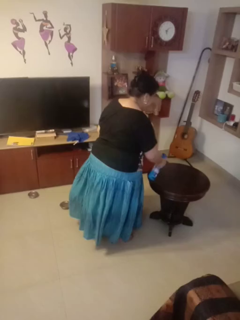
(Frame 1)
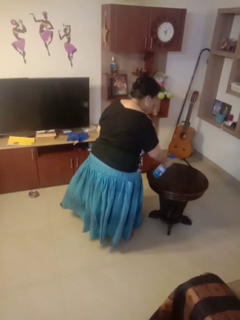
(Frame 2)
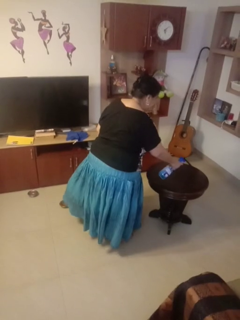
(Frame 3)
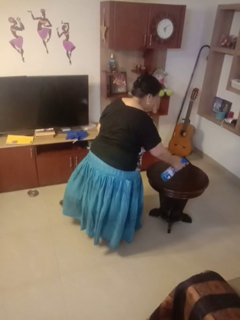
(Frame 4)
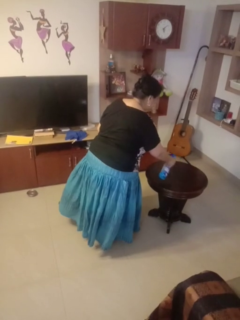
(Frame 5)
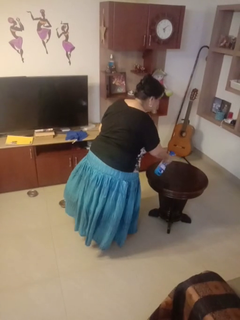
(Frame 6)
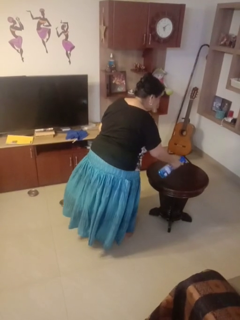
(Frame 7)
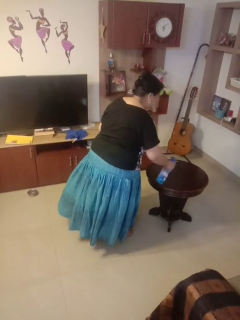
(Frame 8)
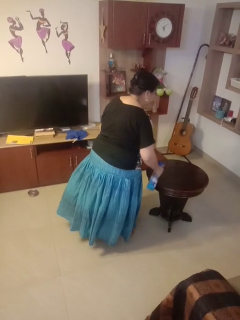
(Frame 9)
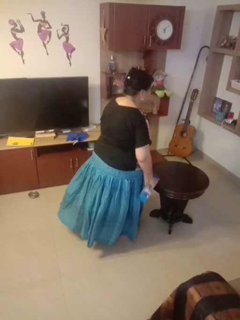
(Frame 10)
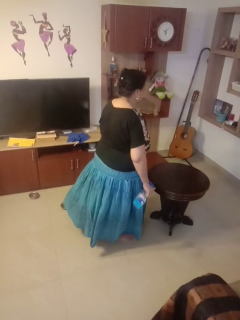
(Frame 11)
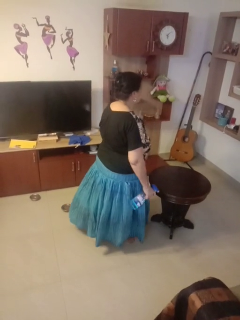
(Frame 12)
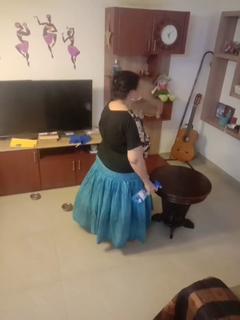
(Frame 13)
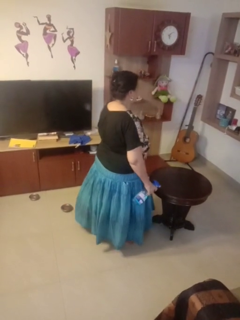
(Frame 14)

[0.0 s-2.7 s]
person sprays from bottle

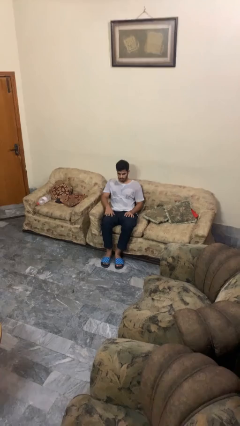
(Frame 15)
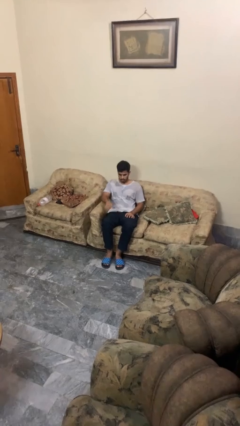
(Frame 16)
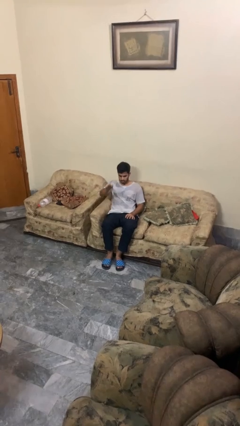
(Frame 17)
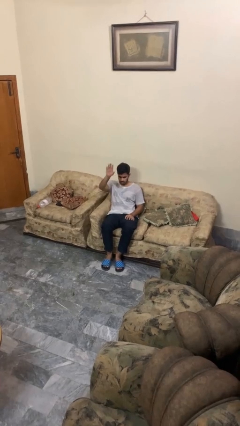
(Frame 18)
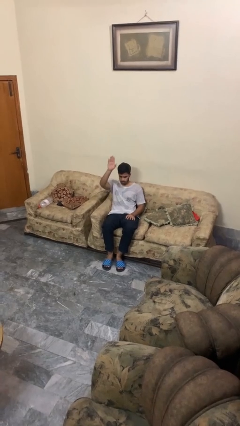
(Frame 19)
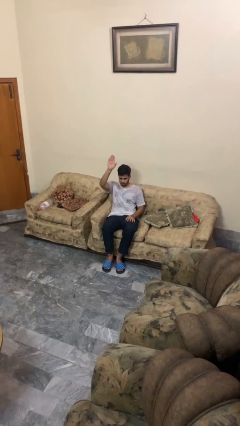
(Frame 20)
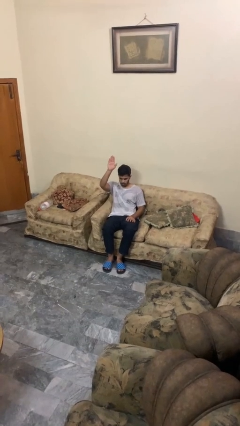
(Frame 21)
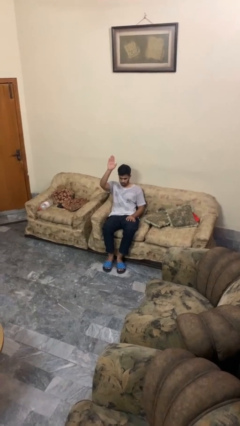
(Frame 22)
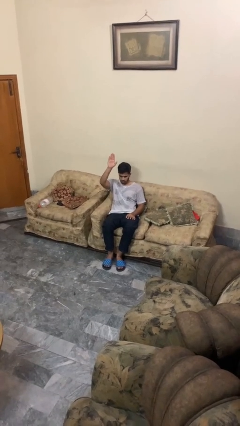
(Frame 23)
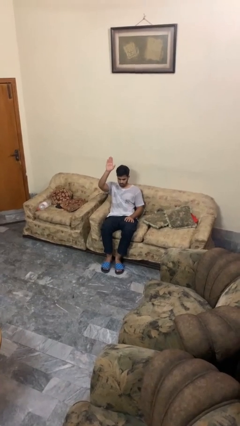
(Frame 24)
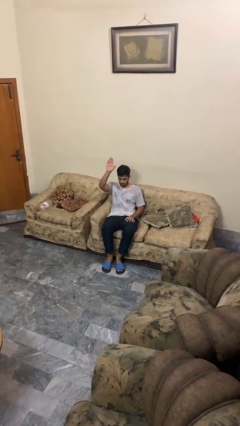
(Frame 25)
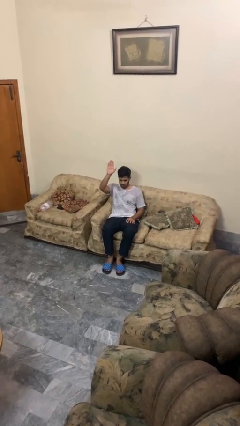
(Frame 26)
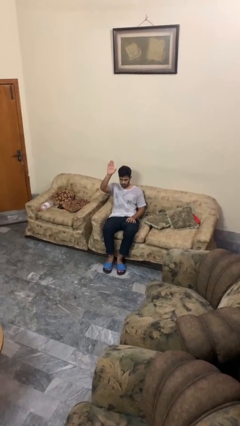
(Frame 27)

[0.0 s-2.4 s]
person gestures raise hand

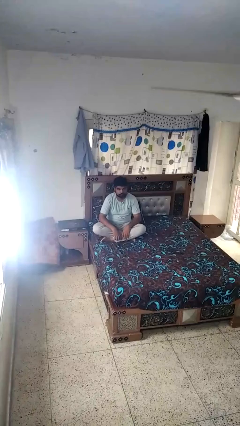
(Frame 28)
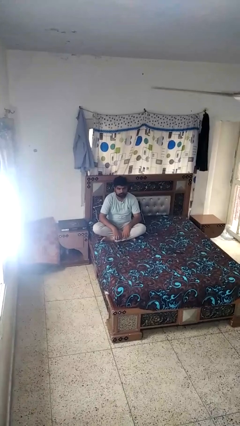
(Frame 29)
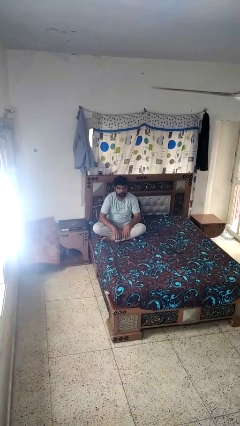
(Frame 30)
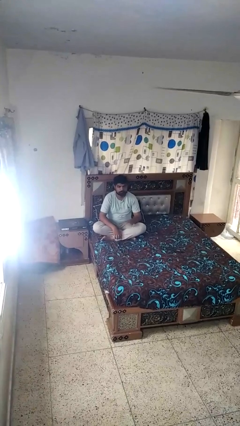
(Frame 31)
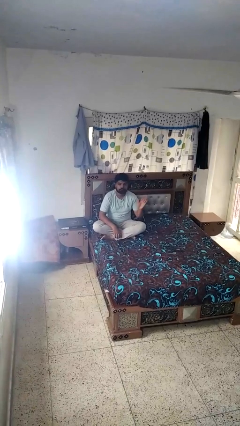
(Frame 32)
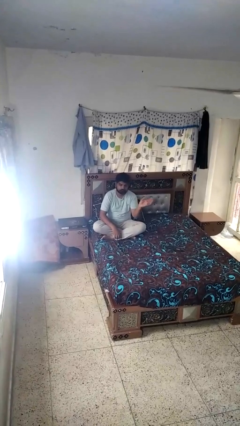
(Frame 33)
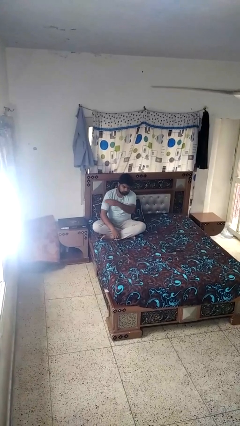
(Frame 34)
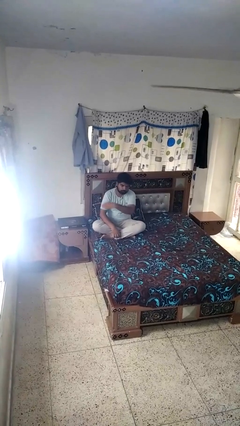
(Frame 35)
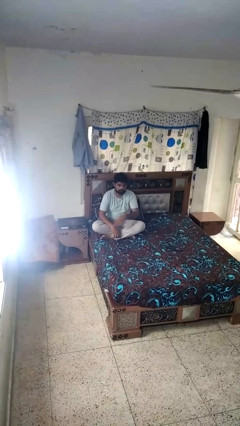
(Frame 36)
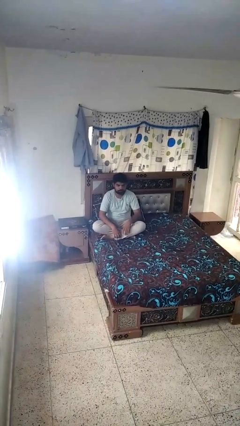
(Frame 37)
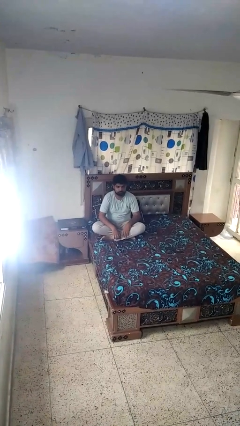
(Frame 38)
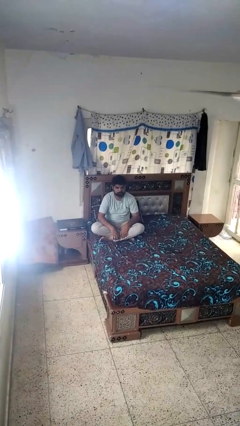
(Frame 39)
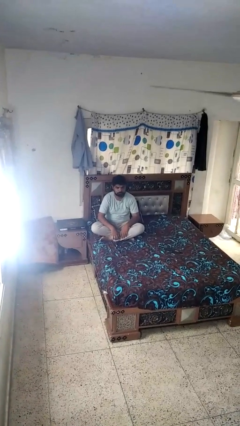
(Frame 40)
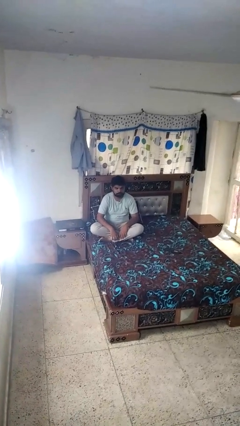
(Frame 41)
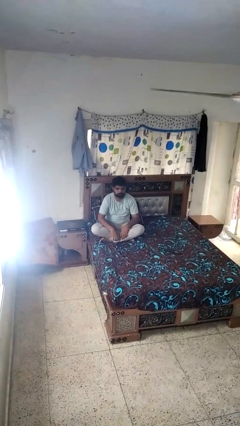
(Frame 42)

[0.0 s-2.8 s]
person gestures swipe right

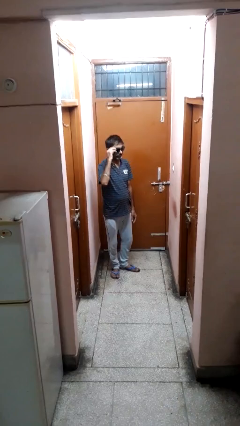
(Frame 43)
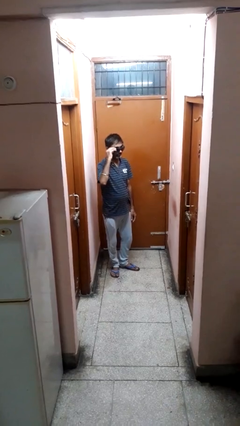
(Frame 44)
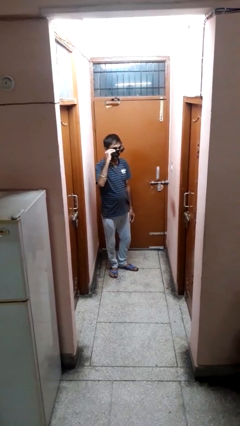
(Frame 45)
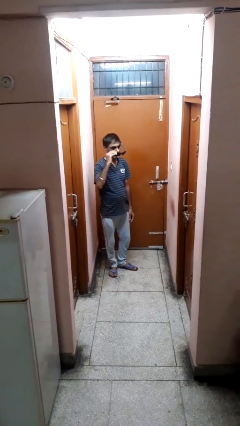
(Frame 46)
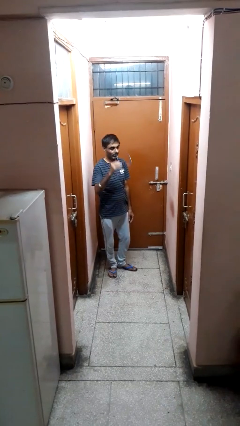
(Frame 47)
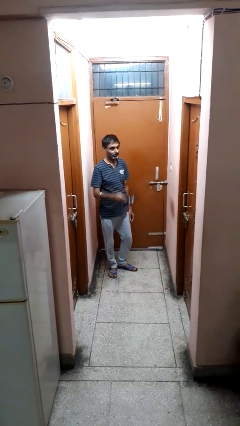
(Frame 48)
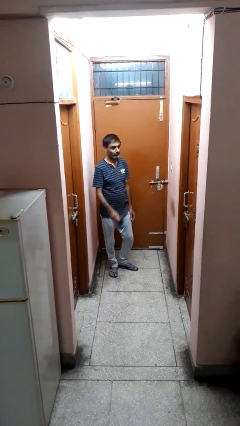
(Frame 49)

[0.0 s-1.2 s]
person takes off sunglasses

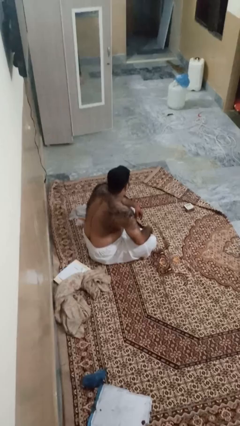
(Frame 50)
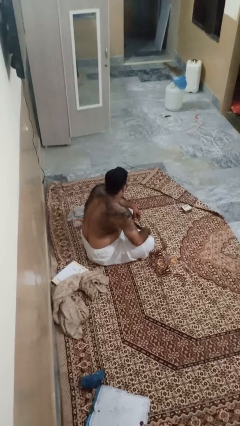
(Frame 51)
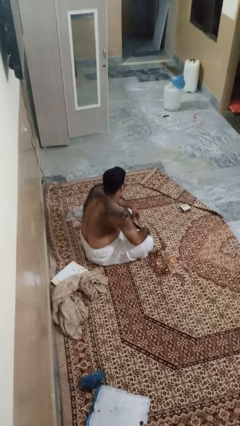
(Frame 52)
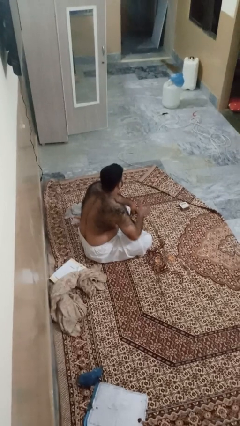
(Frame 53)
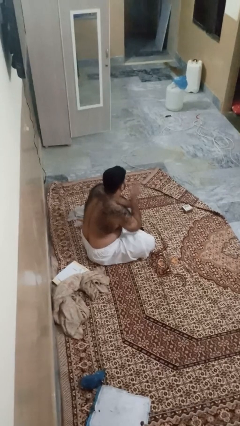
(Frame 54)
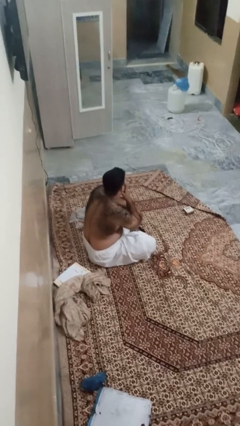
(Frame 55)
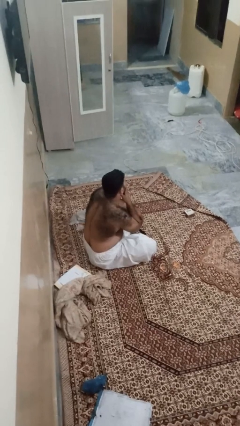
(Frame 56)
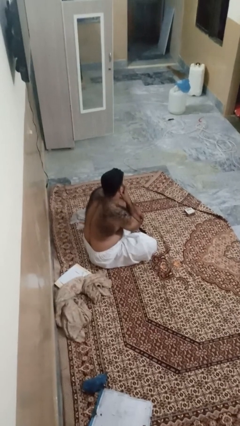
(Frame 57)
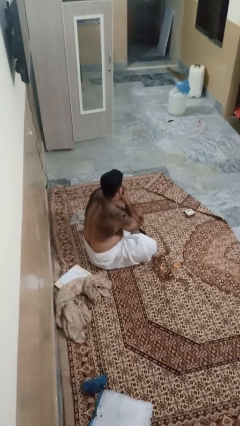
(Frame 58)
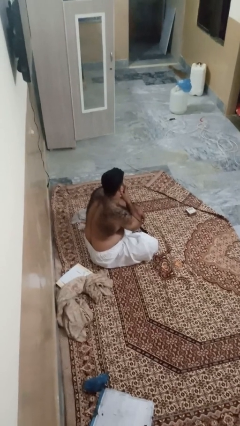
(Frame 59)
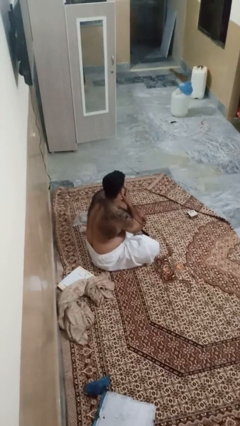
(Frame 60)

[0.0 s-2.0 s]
person strokes chin

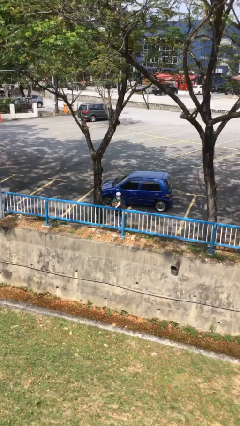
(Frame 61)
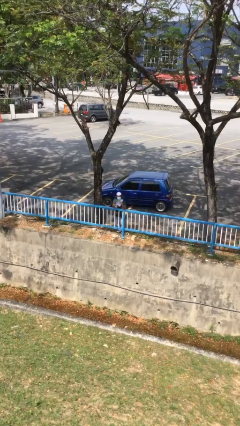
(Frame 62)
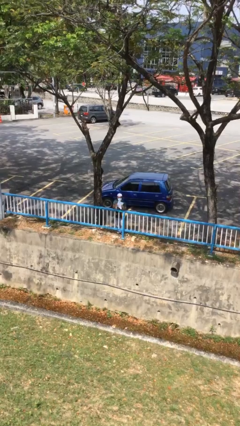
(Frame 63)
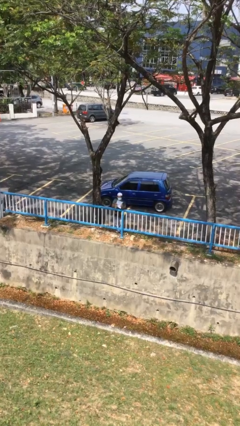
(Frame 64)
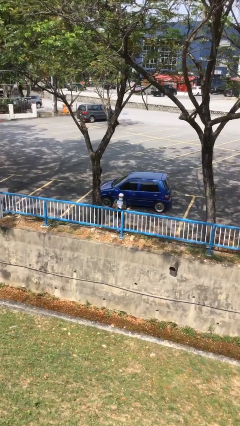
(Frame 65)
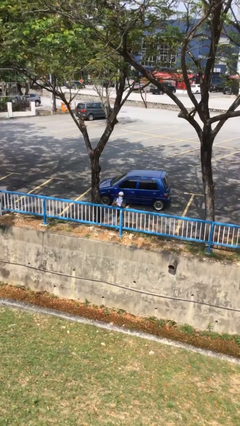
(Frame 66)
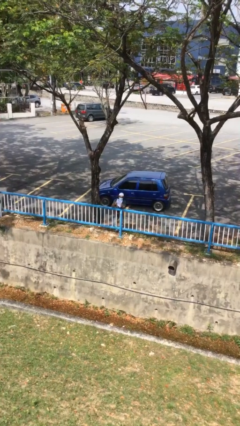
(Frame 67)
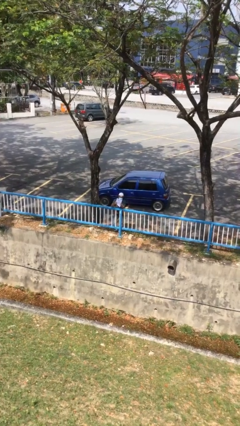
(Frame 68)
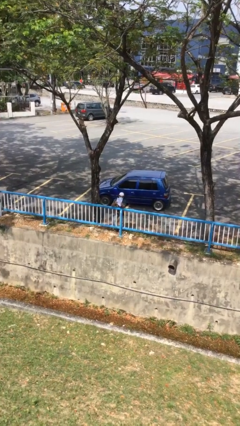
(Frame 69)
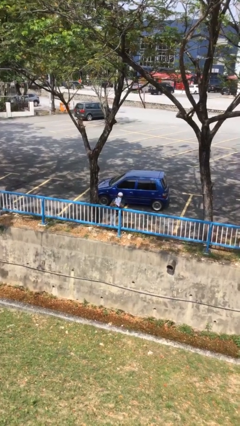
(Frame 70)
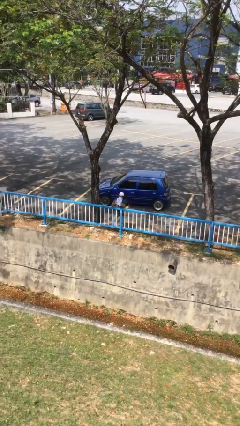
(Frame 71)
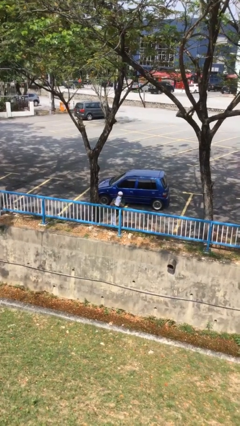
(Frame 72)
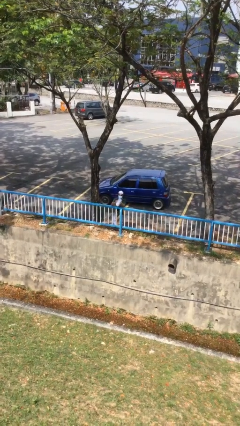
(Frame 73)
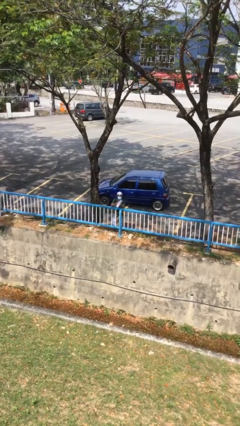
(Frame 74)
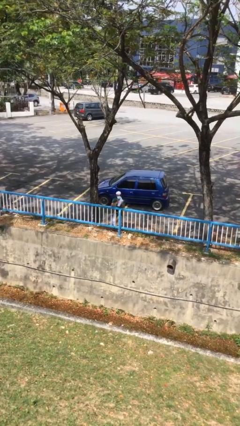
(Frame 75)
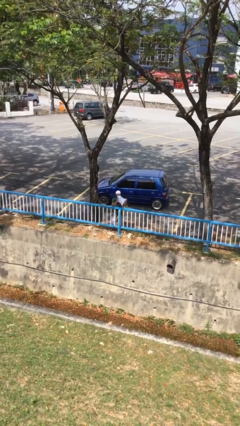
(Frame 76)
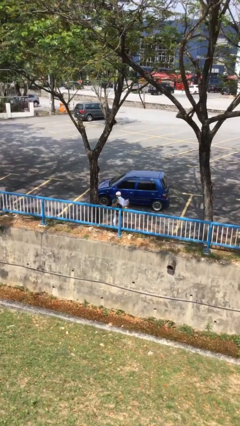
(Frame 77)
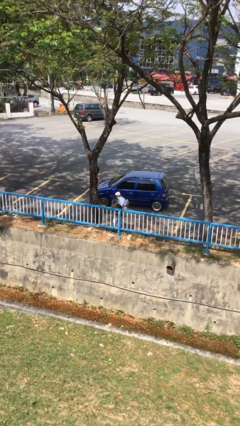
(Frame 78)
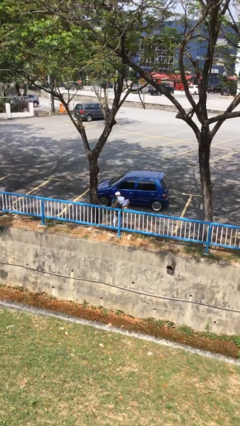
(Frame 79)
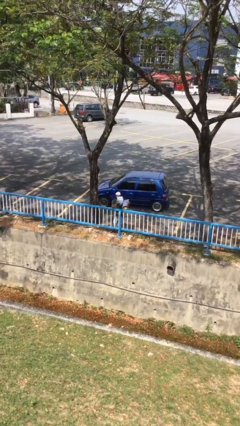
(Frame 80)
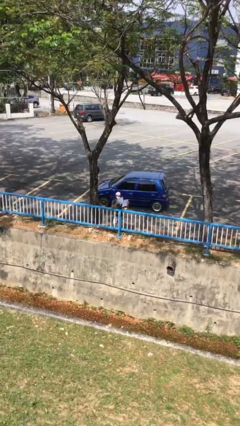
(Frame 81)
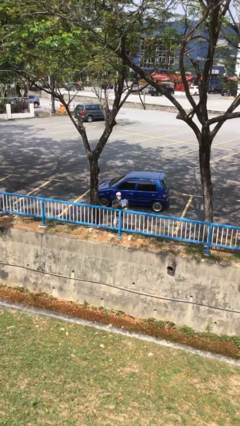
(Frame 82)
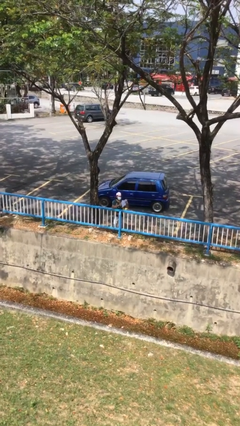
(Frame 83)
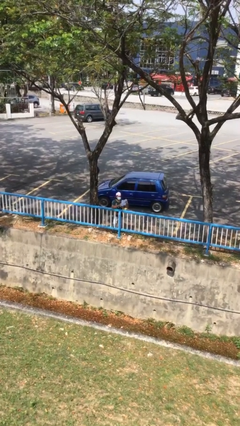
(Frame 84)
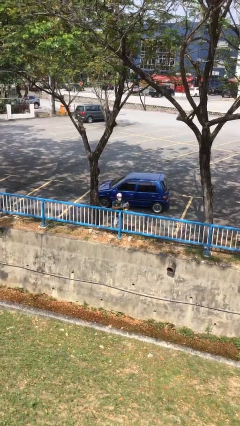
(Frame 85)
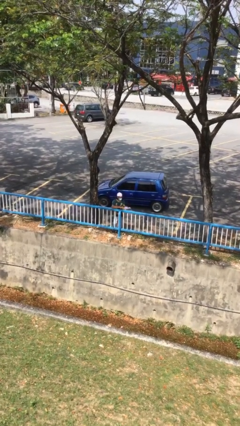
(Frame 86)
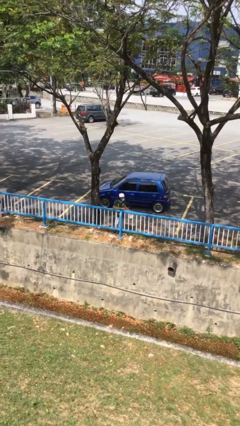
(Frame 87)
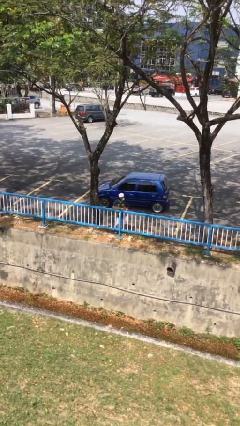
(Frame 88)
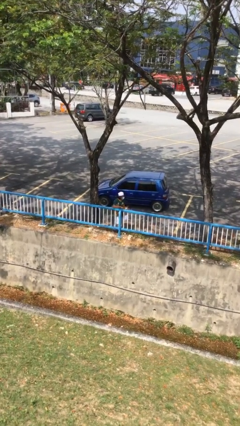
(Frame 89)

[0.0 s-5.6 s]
person reads document

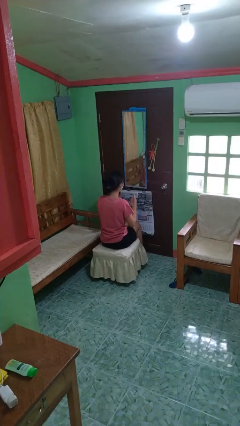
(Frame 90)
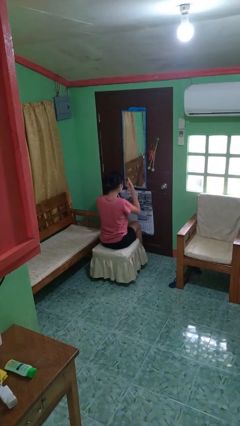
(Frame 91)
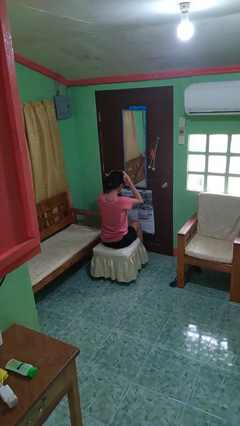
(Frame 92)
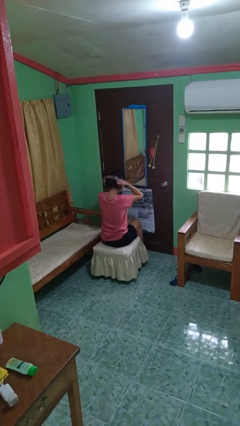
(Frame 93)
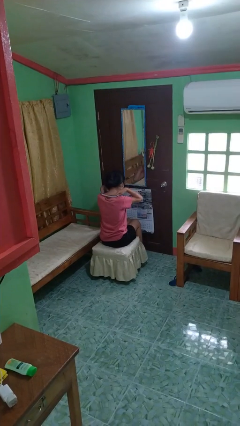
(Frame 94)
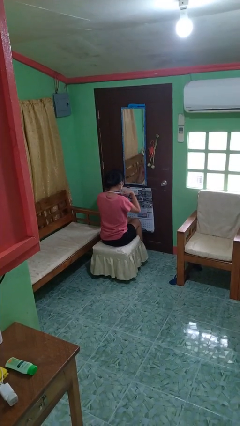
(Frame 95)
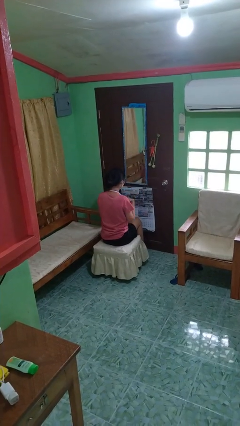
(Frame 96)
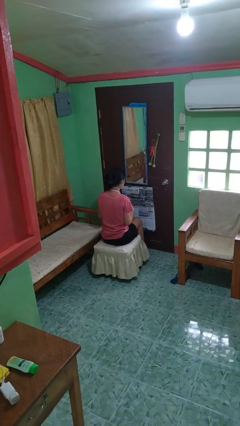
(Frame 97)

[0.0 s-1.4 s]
person puts on necklace
